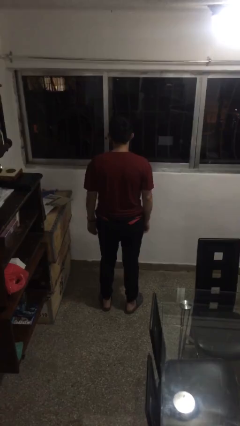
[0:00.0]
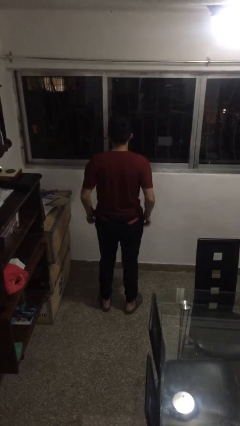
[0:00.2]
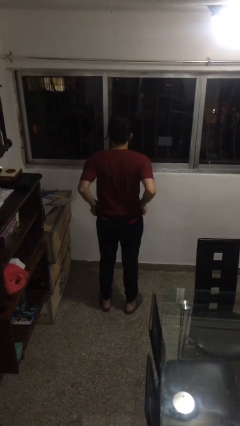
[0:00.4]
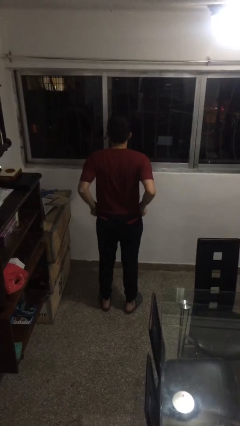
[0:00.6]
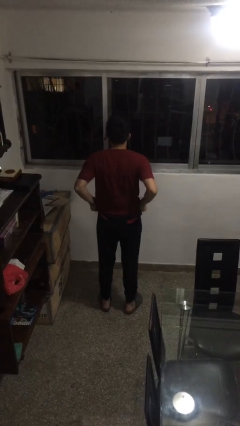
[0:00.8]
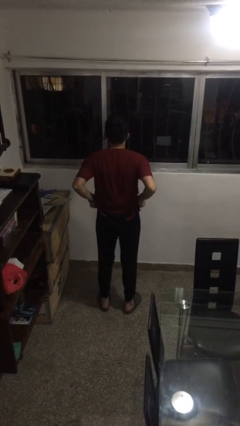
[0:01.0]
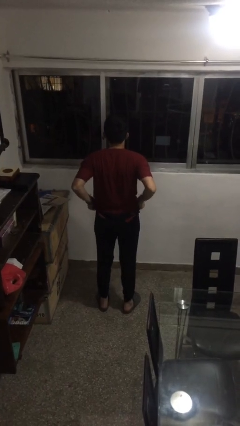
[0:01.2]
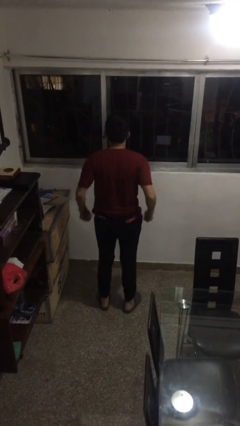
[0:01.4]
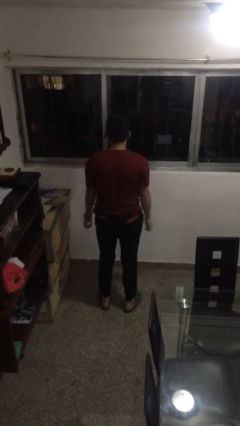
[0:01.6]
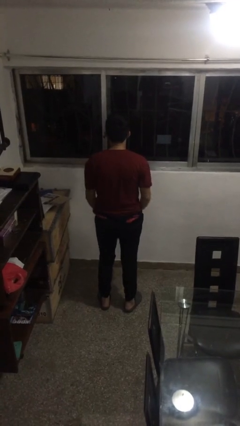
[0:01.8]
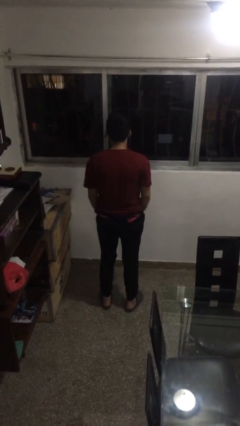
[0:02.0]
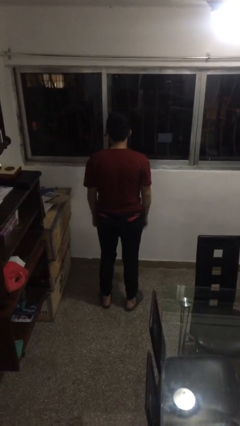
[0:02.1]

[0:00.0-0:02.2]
person hikes up pants

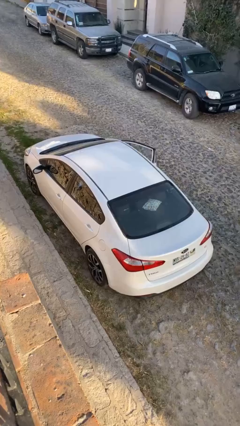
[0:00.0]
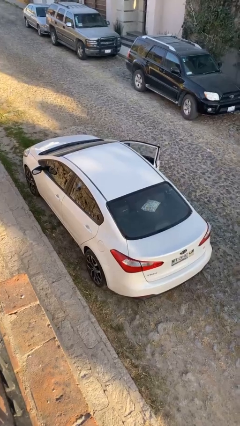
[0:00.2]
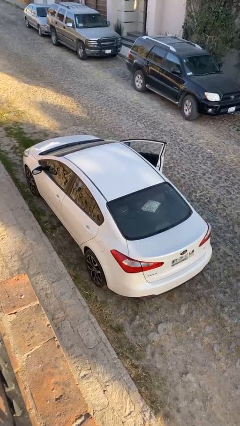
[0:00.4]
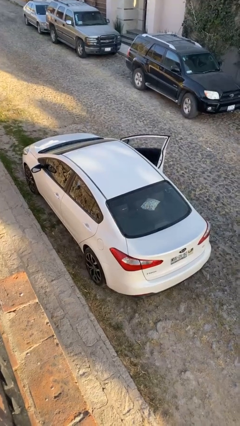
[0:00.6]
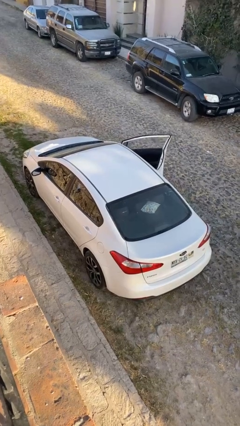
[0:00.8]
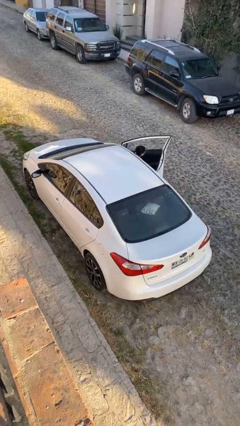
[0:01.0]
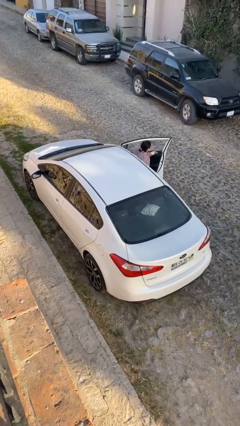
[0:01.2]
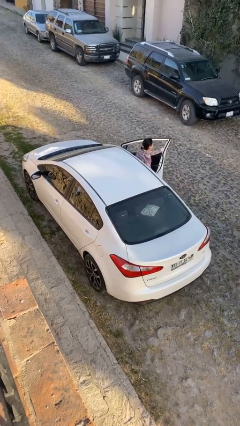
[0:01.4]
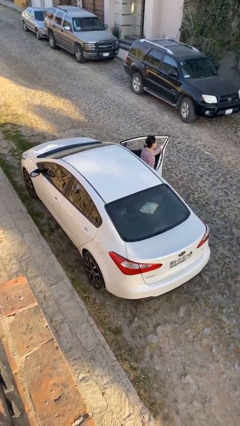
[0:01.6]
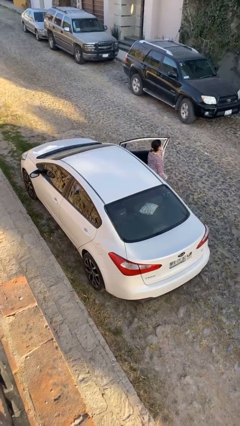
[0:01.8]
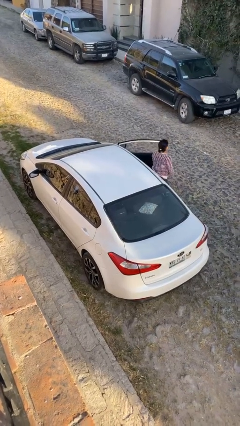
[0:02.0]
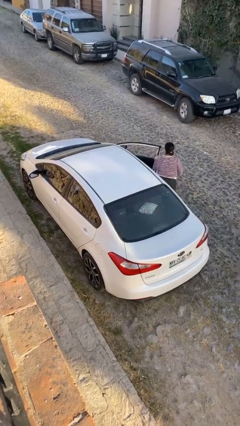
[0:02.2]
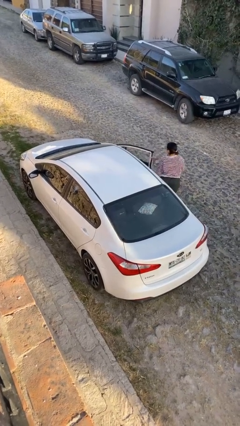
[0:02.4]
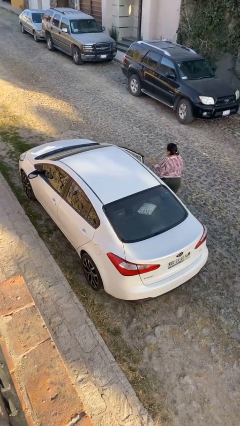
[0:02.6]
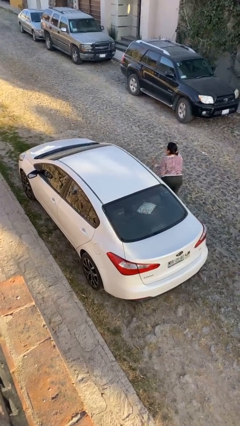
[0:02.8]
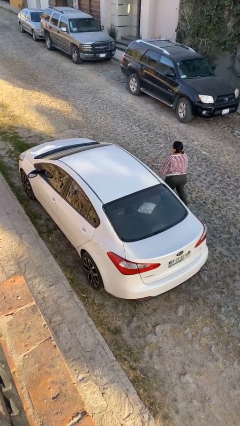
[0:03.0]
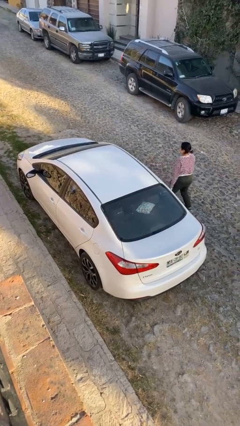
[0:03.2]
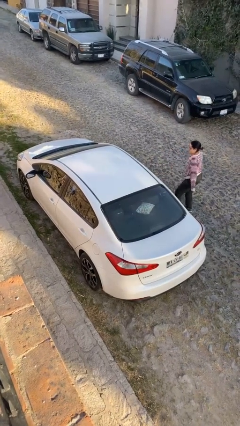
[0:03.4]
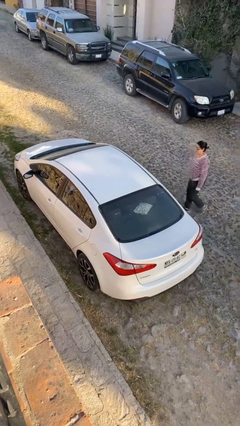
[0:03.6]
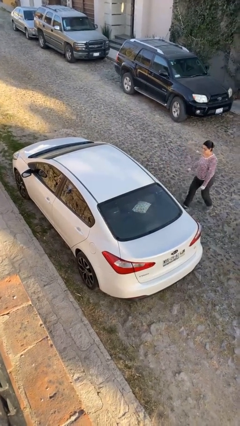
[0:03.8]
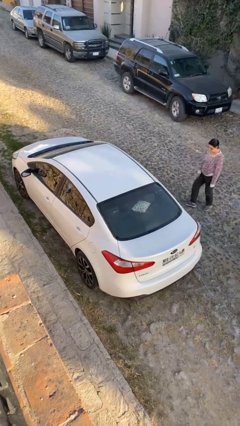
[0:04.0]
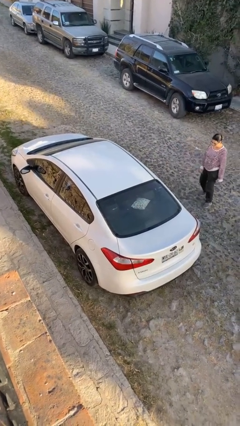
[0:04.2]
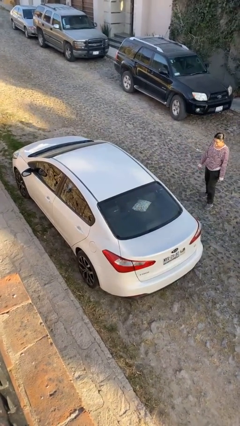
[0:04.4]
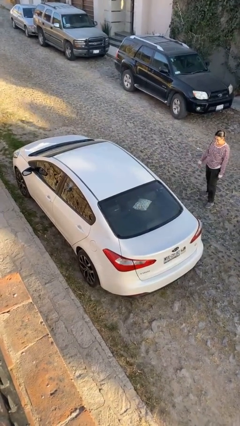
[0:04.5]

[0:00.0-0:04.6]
car drops off person

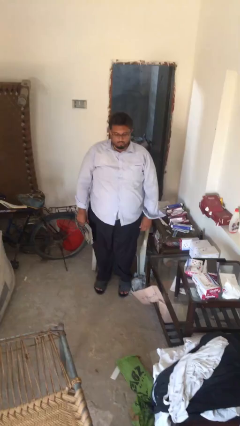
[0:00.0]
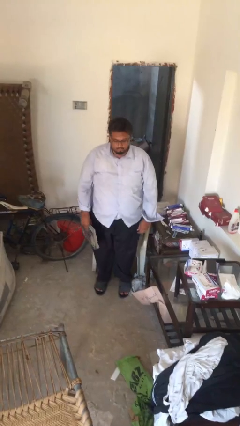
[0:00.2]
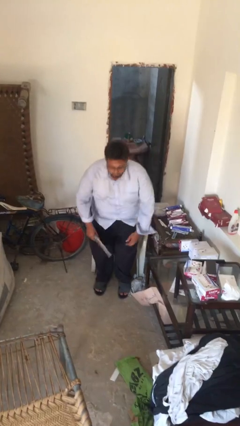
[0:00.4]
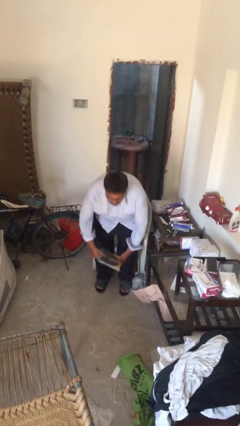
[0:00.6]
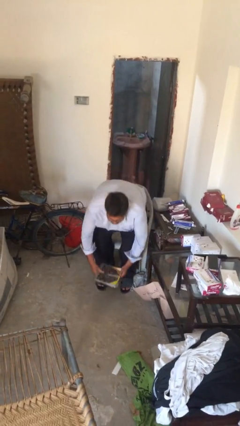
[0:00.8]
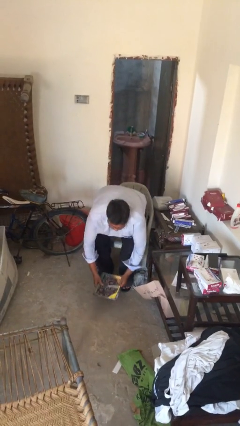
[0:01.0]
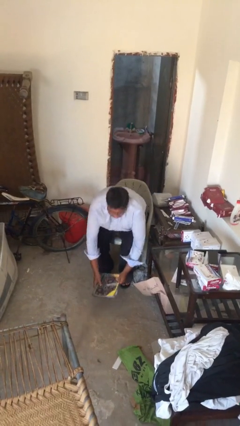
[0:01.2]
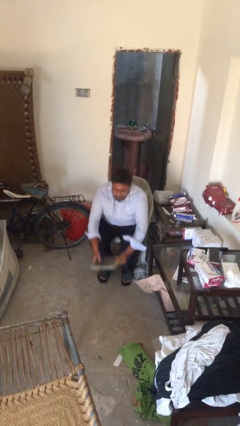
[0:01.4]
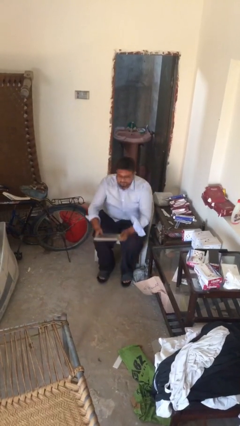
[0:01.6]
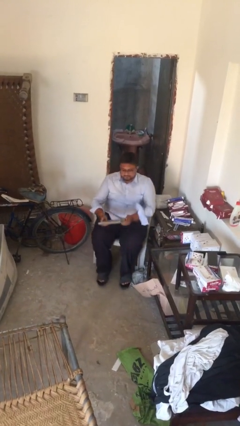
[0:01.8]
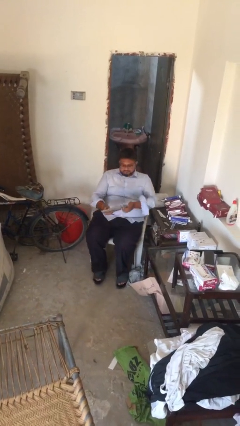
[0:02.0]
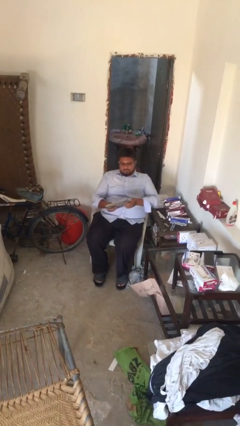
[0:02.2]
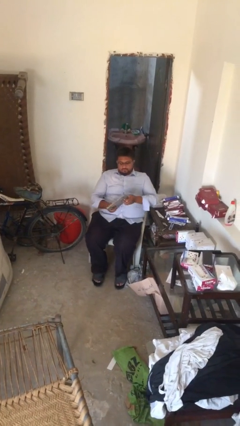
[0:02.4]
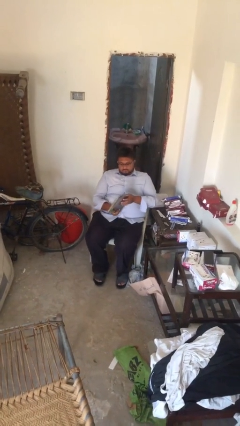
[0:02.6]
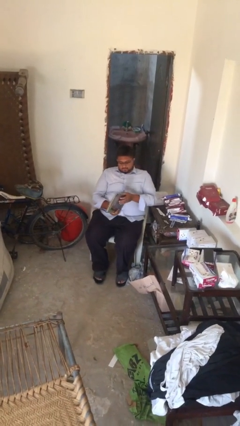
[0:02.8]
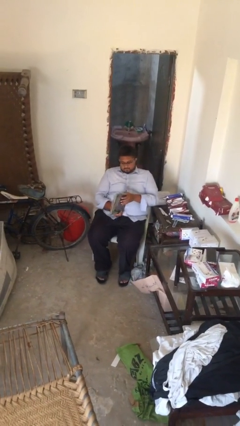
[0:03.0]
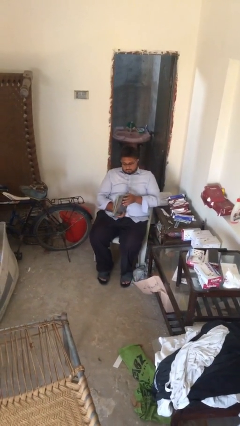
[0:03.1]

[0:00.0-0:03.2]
person sits down

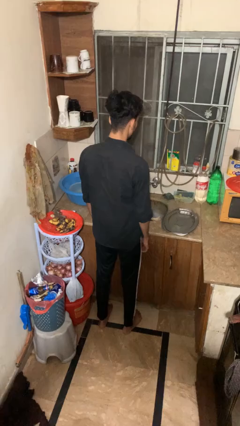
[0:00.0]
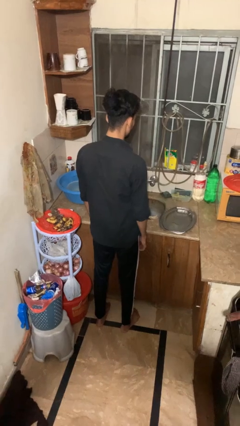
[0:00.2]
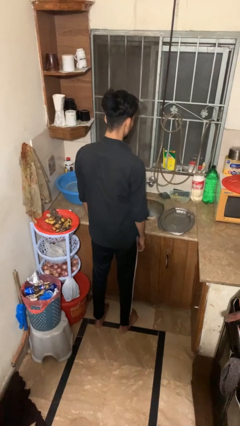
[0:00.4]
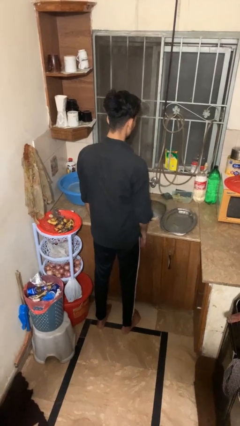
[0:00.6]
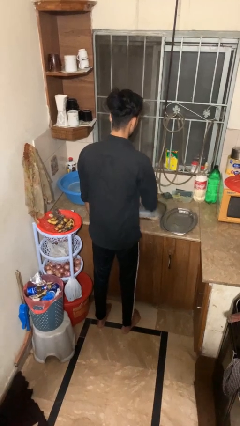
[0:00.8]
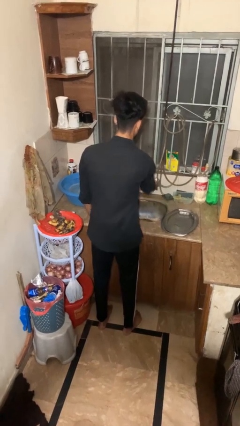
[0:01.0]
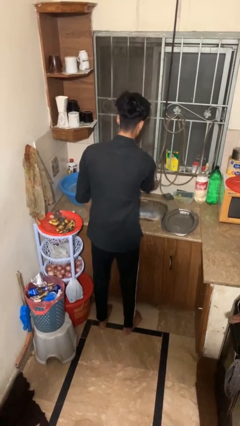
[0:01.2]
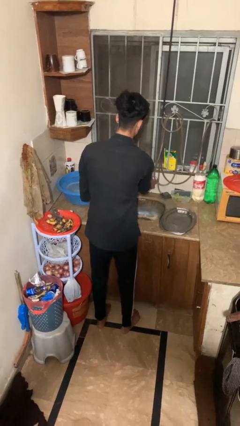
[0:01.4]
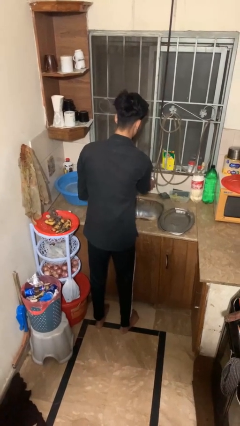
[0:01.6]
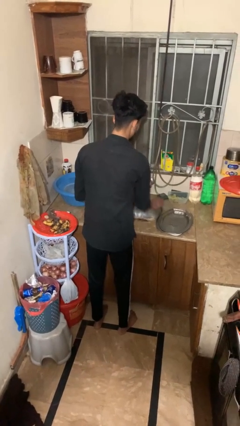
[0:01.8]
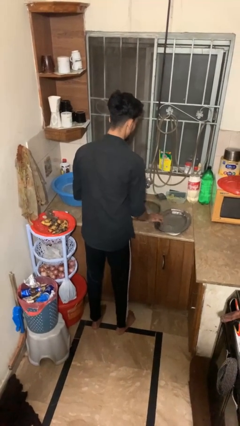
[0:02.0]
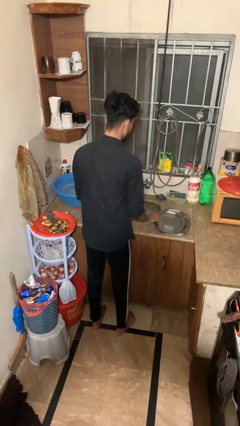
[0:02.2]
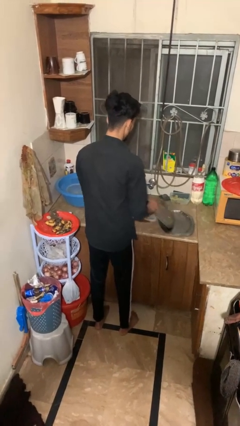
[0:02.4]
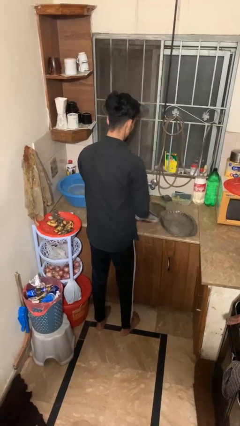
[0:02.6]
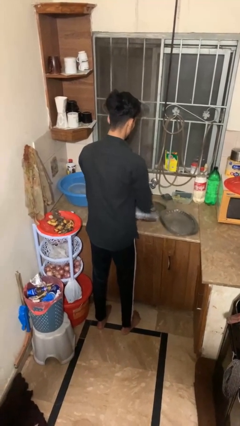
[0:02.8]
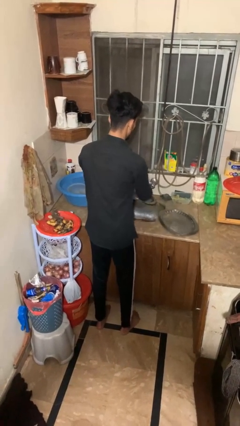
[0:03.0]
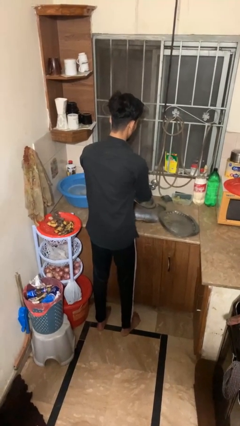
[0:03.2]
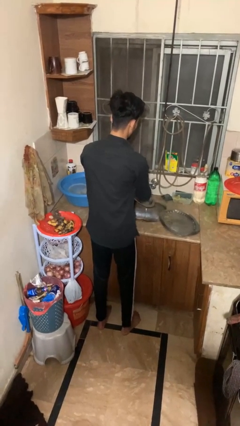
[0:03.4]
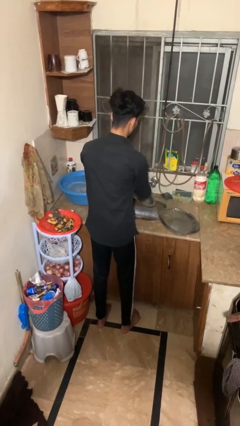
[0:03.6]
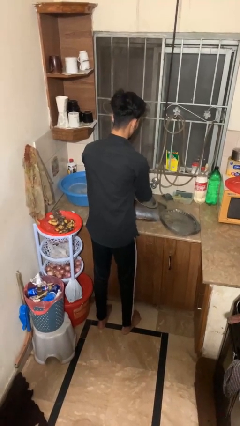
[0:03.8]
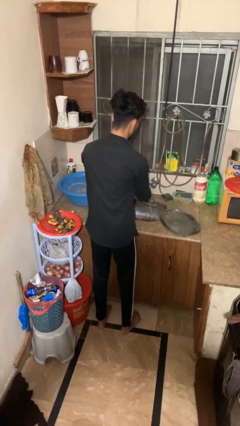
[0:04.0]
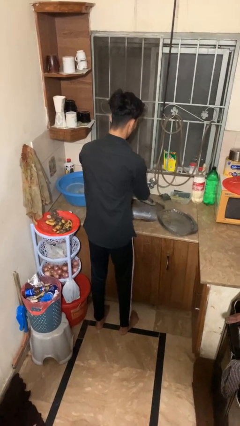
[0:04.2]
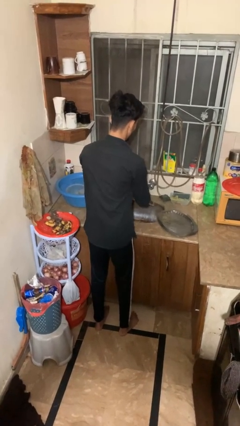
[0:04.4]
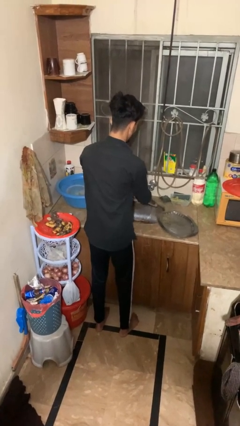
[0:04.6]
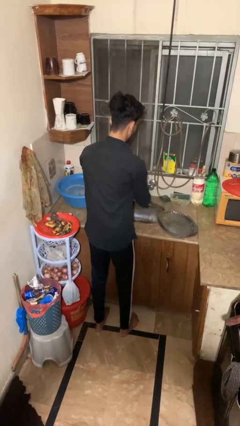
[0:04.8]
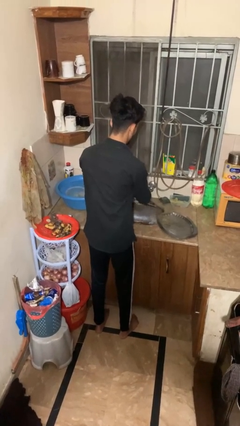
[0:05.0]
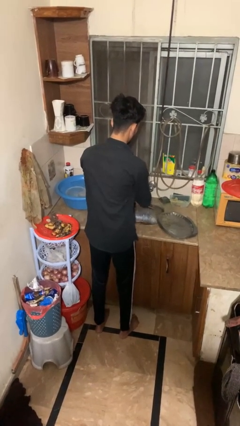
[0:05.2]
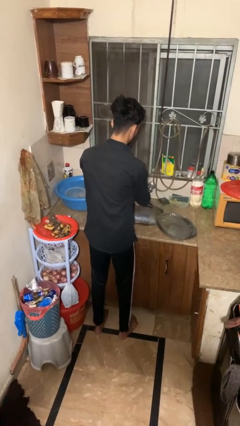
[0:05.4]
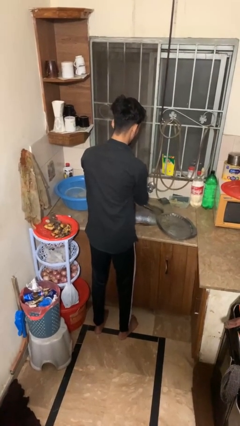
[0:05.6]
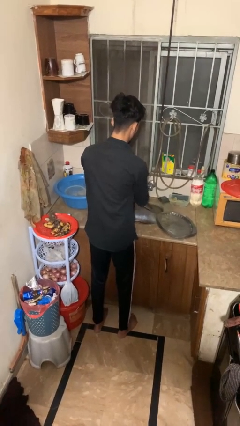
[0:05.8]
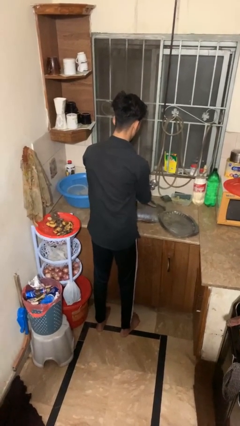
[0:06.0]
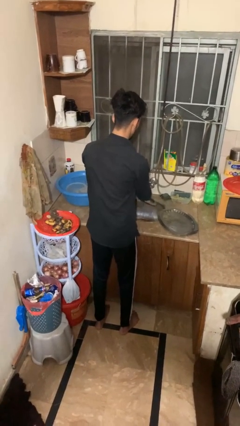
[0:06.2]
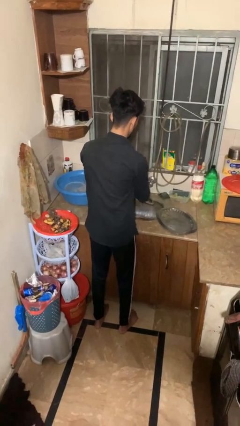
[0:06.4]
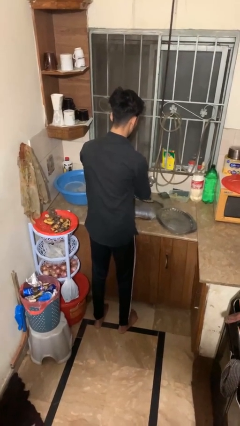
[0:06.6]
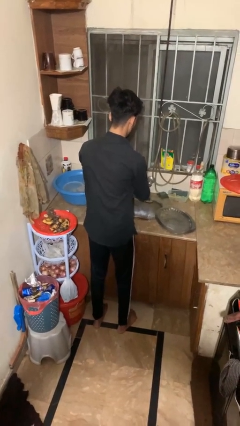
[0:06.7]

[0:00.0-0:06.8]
person opens dishwasher

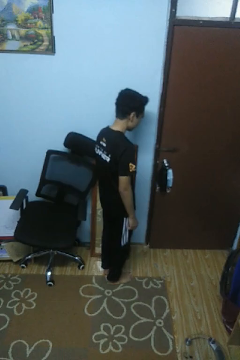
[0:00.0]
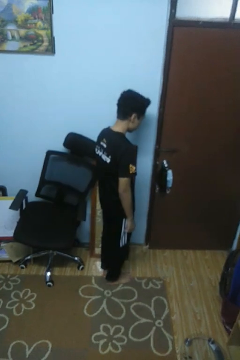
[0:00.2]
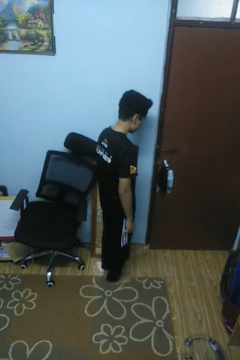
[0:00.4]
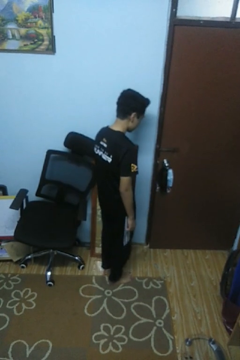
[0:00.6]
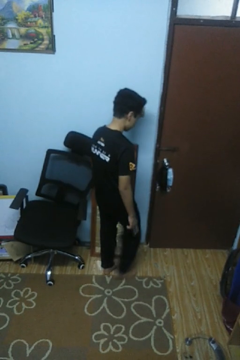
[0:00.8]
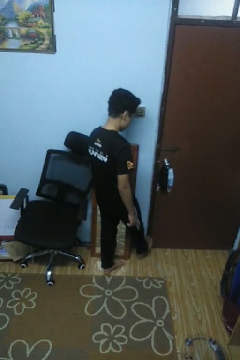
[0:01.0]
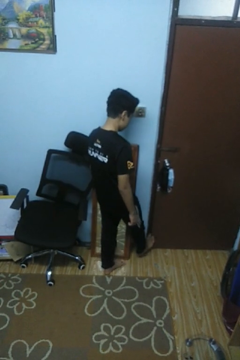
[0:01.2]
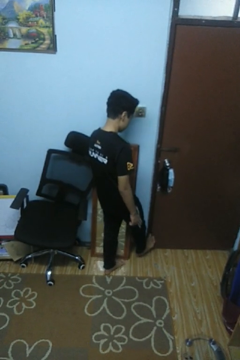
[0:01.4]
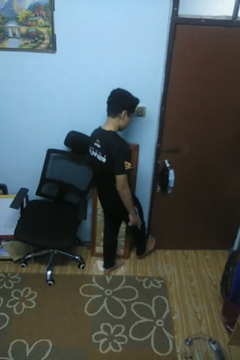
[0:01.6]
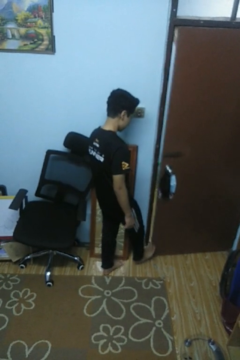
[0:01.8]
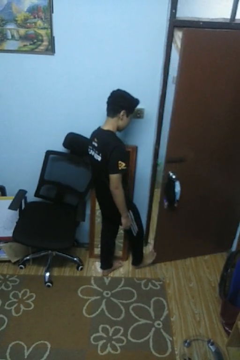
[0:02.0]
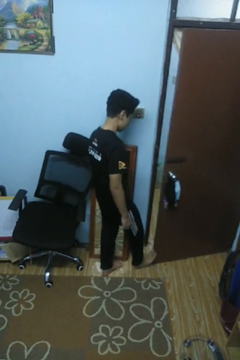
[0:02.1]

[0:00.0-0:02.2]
person opens facility door
